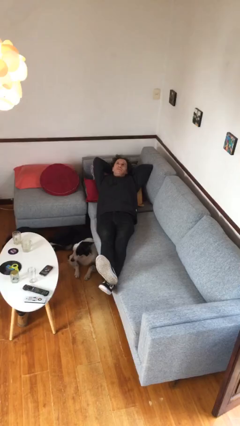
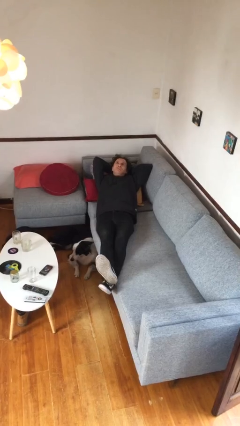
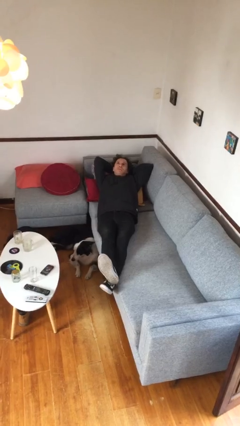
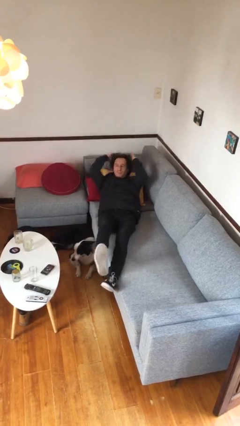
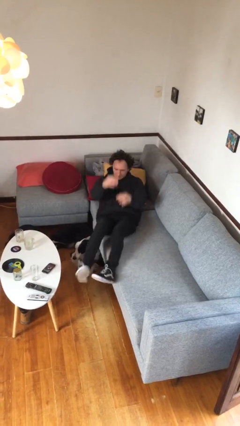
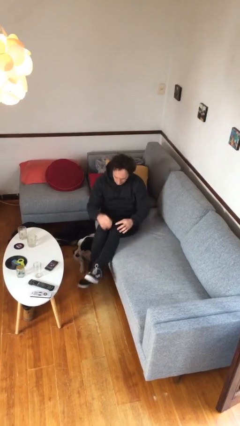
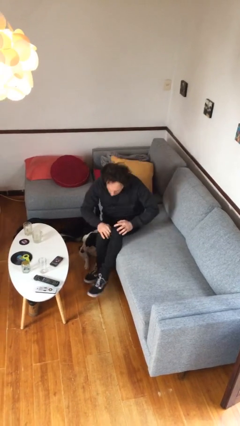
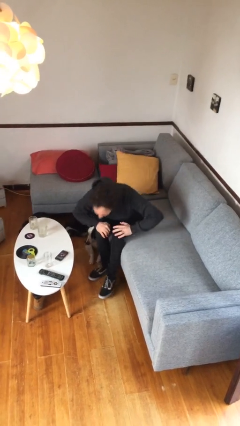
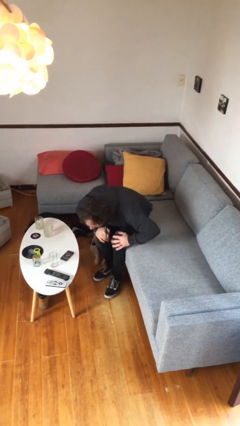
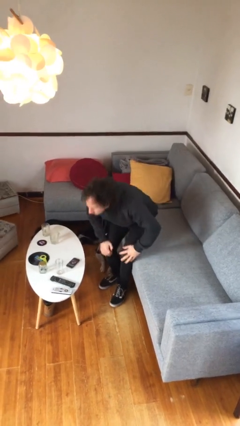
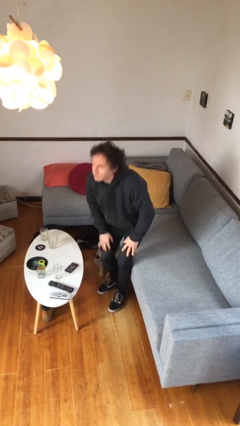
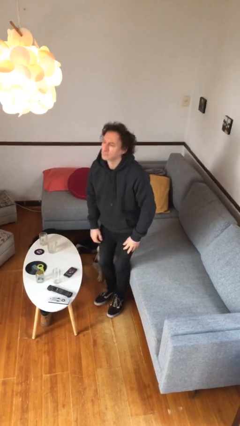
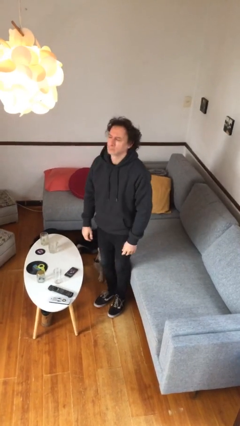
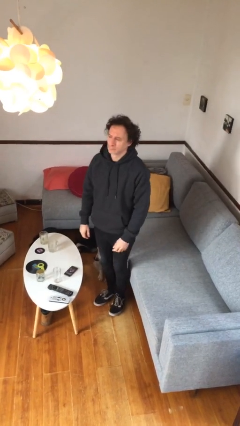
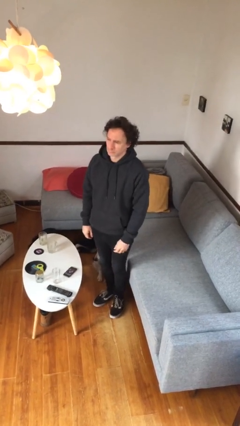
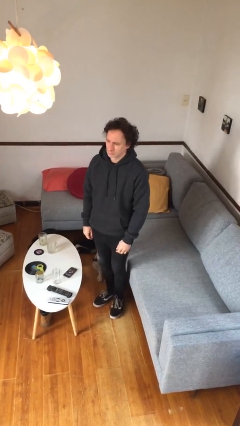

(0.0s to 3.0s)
person stands up

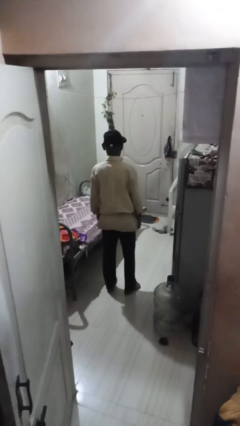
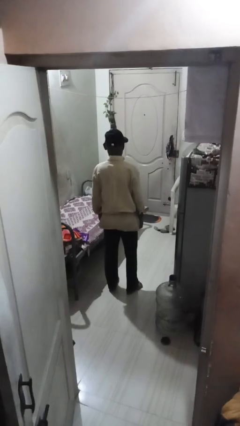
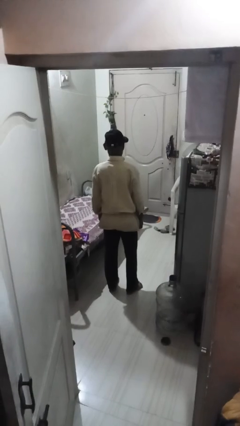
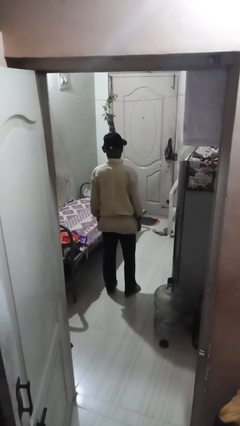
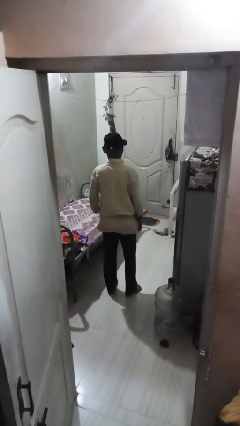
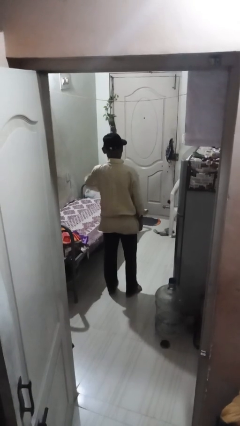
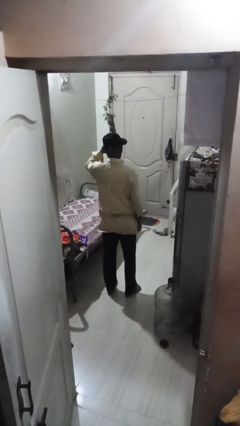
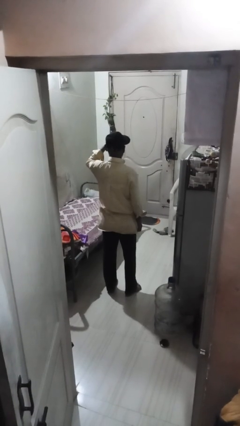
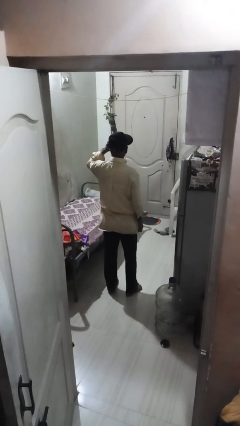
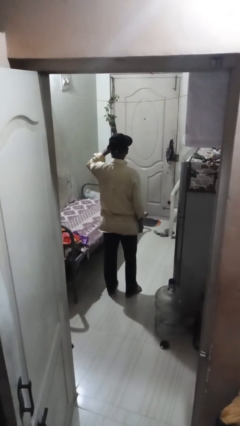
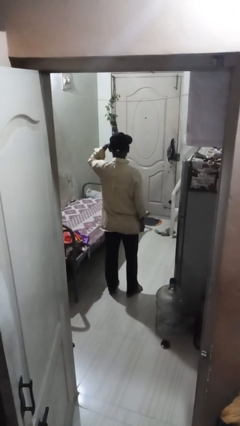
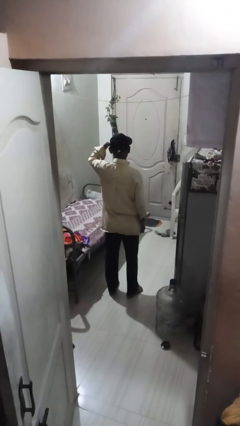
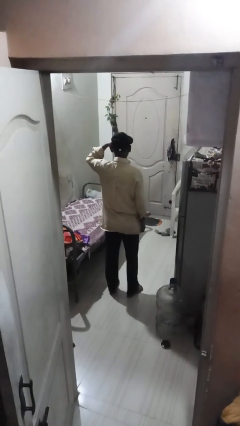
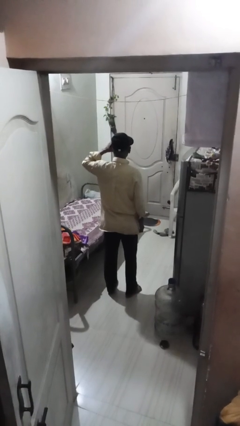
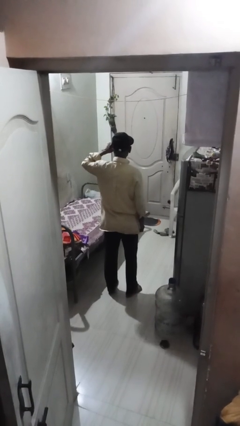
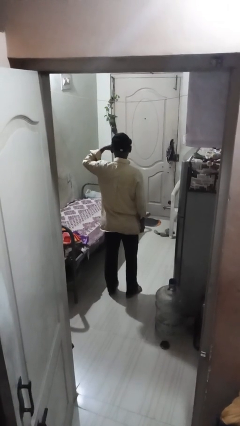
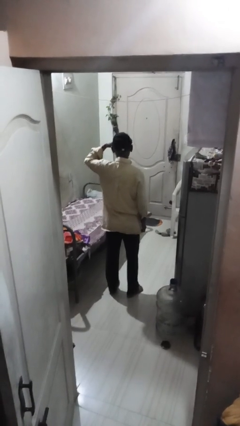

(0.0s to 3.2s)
person rubs eyes

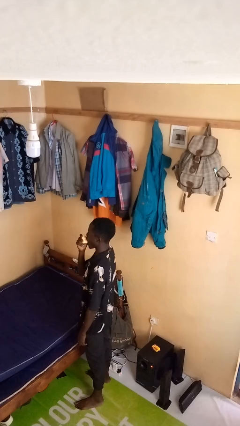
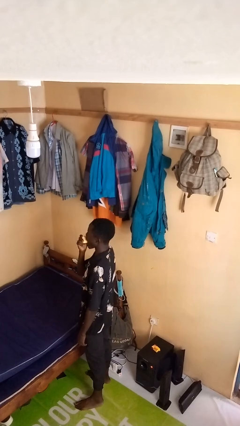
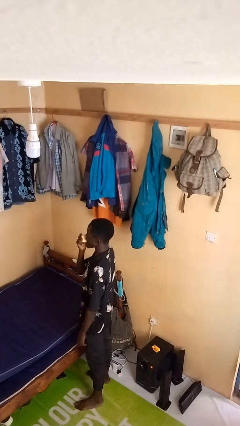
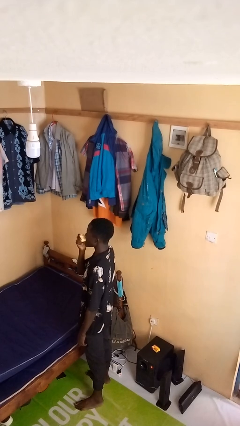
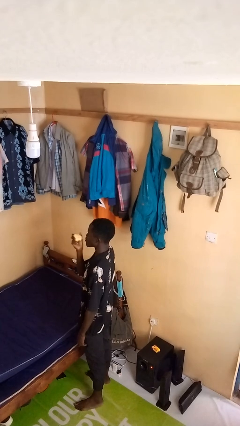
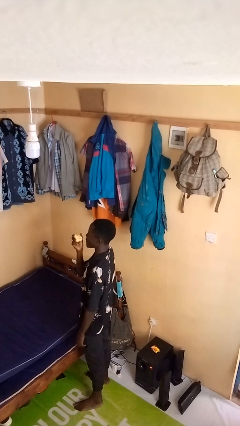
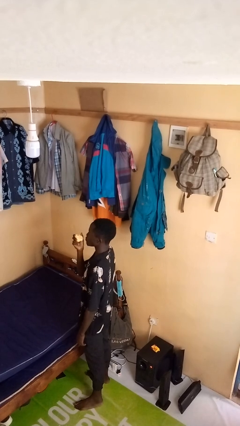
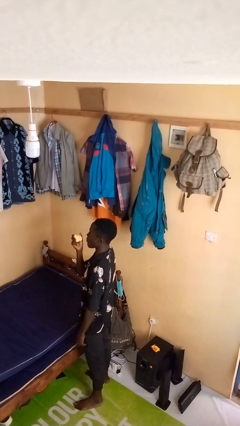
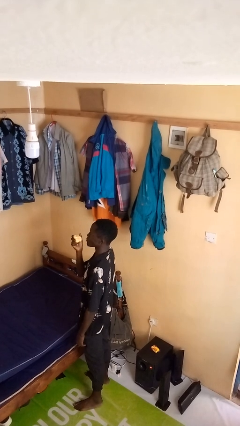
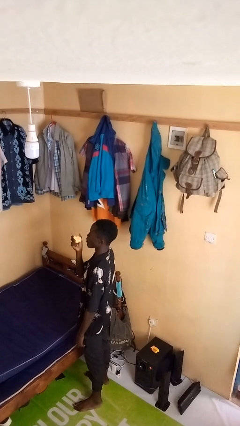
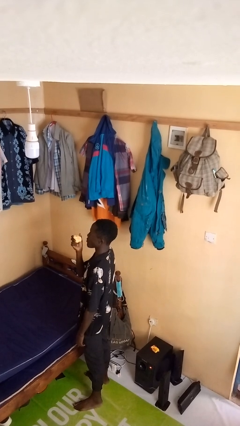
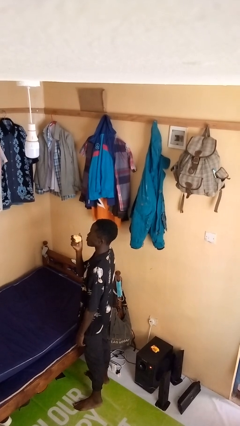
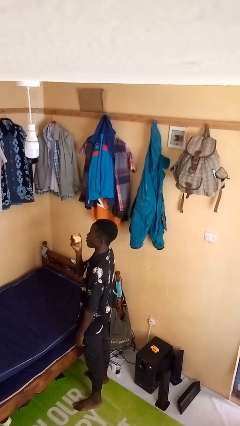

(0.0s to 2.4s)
person eats apple

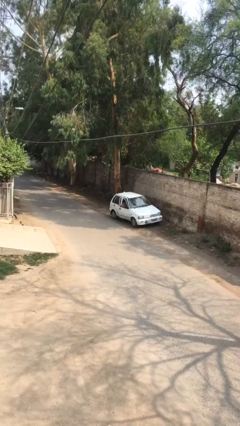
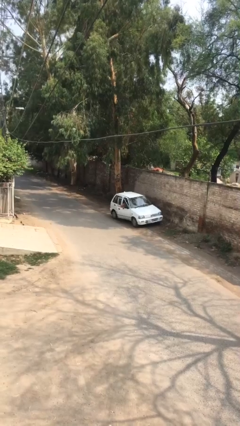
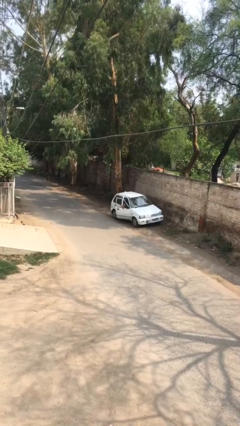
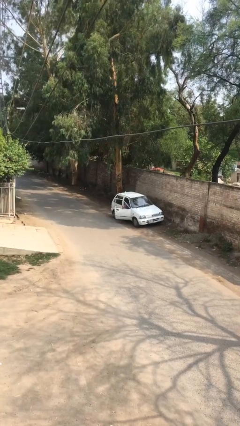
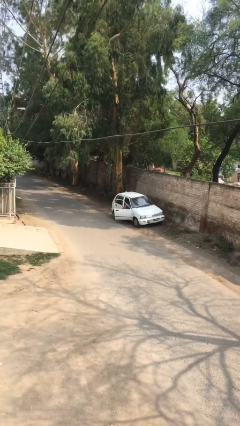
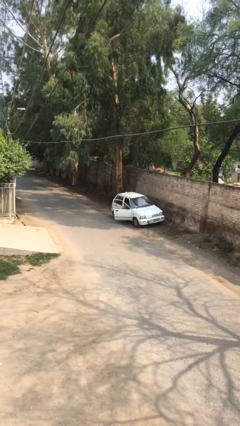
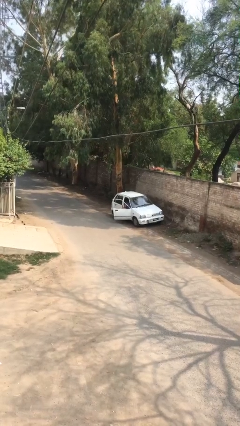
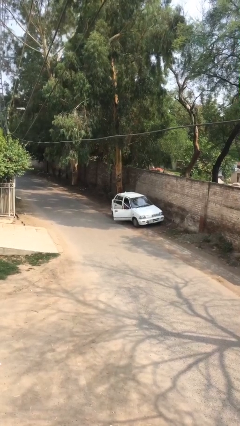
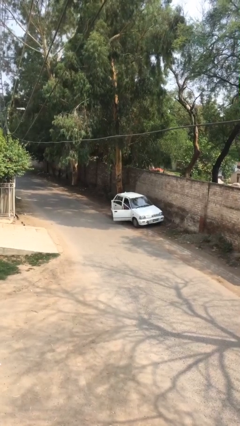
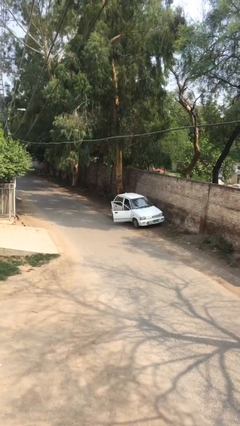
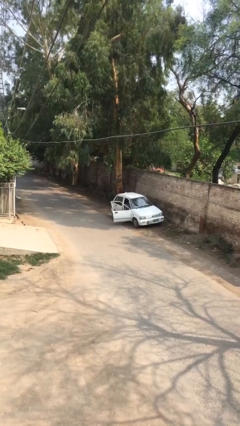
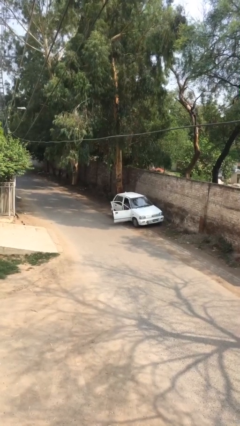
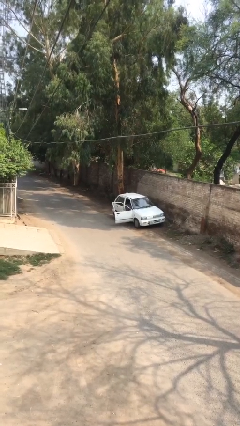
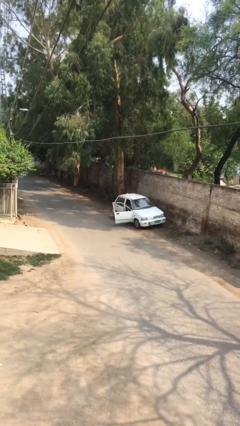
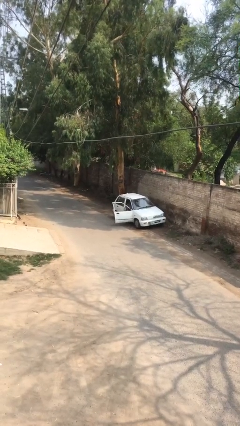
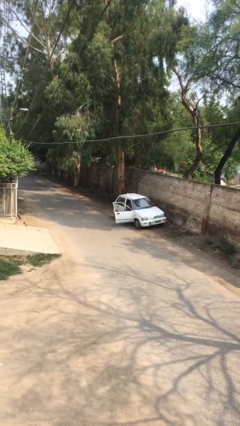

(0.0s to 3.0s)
person opens car door

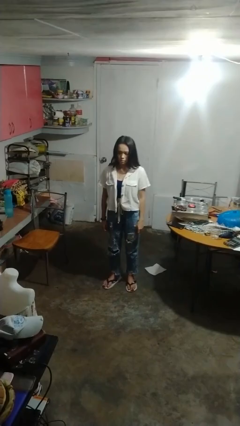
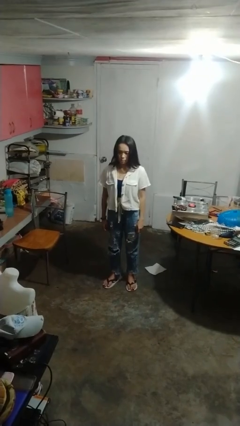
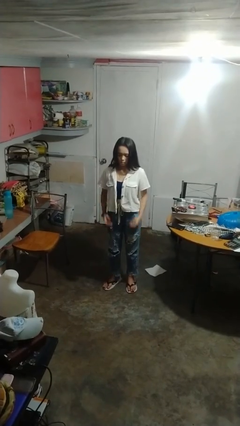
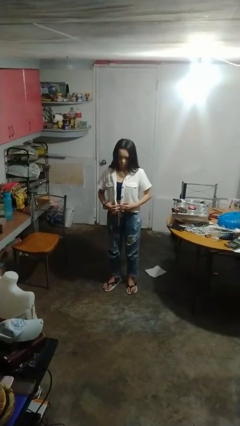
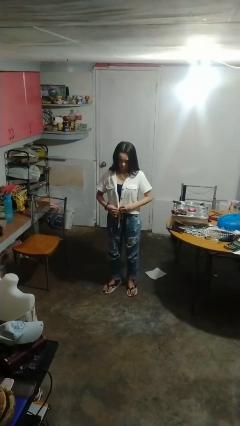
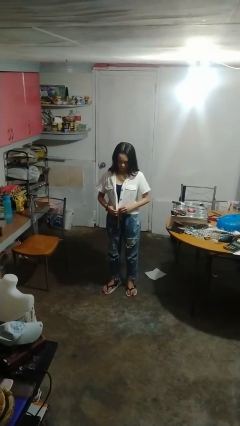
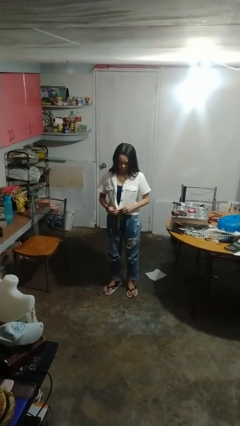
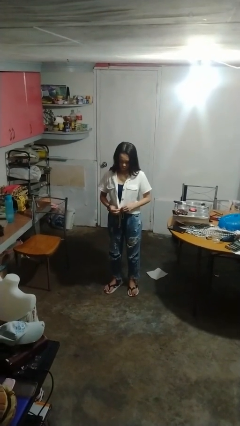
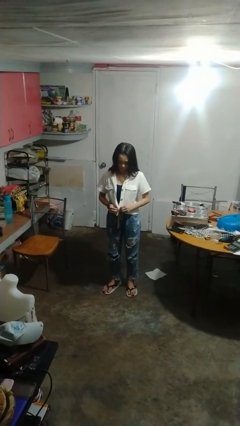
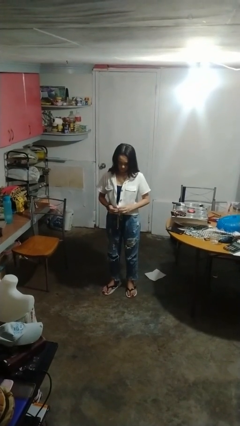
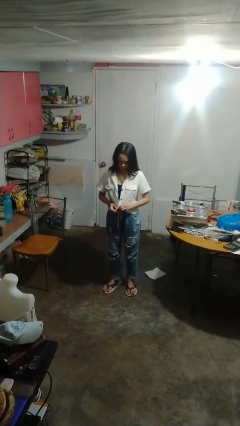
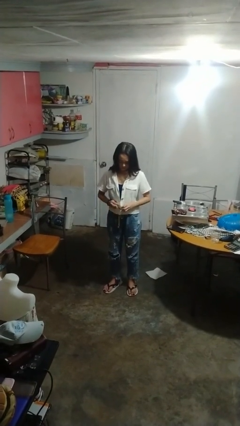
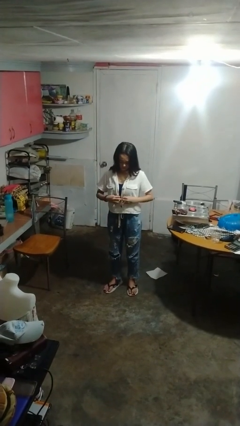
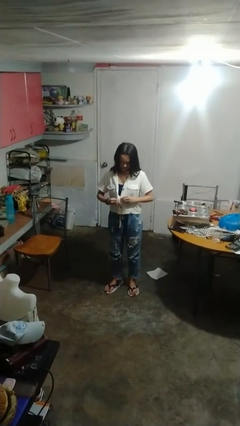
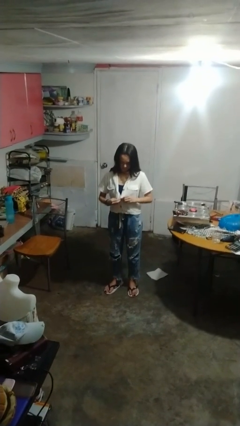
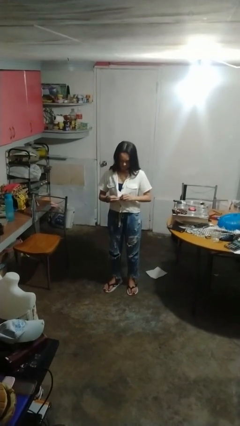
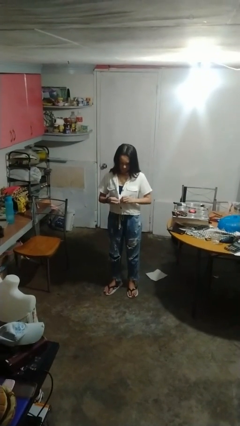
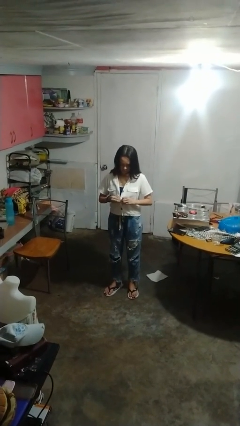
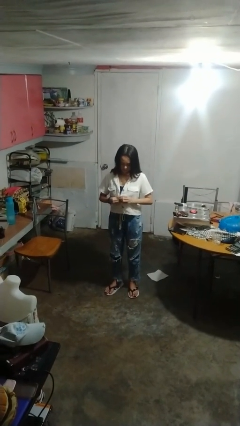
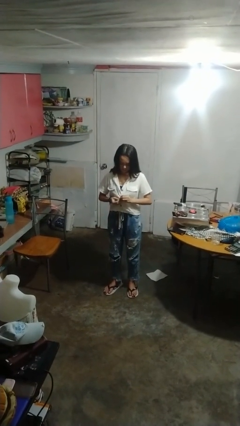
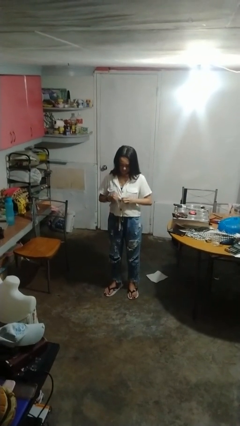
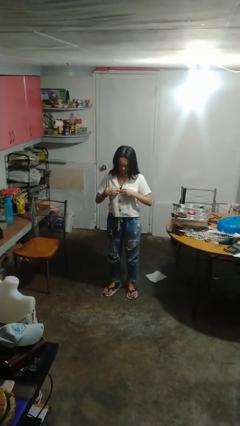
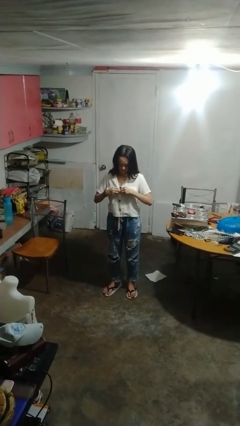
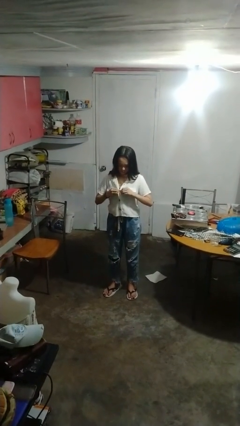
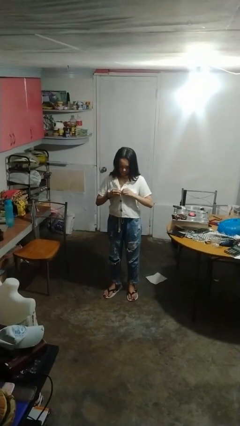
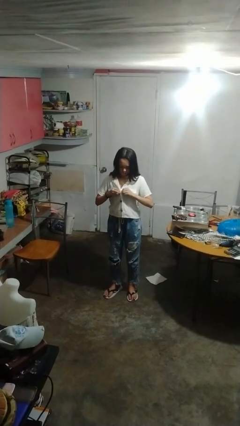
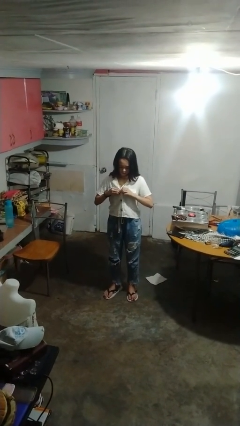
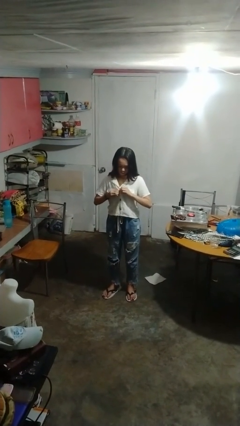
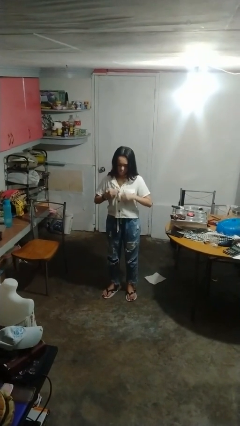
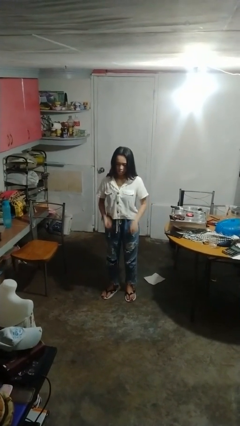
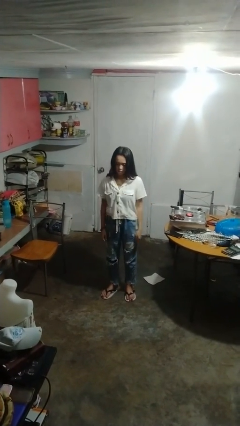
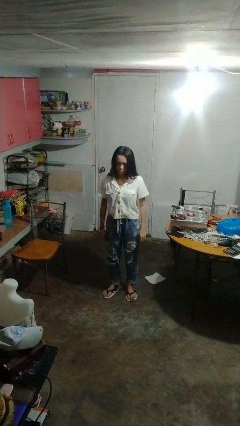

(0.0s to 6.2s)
person buttons shirt
